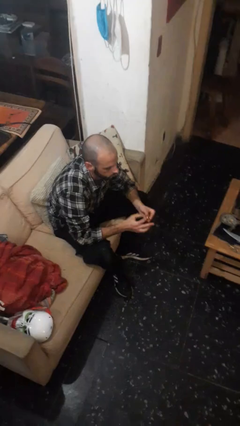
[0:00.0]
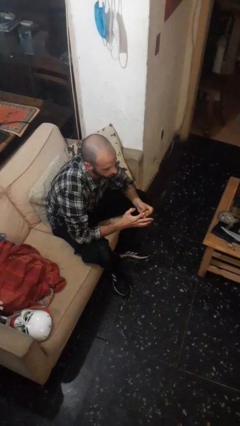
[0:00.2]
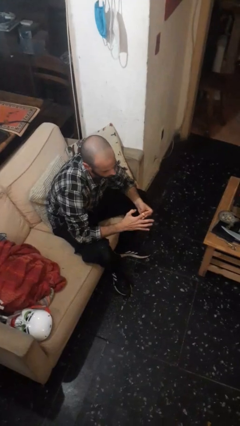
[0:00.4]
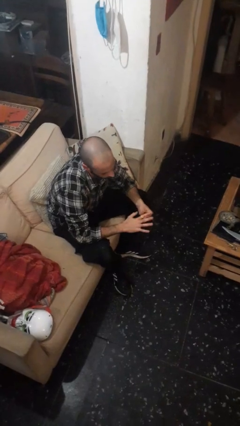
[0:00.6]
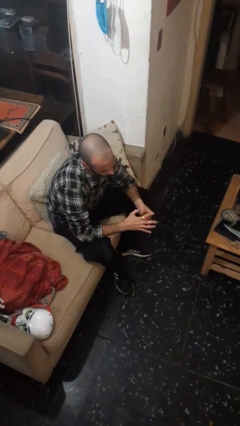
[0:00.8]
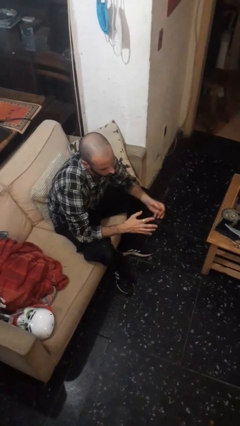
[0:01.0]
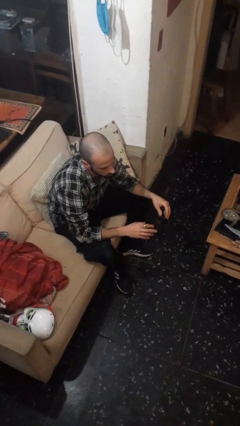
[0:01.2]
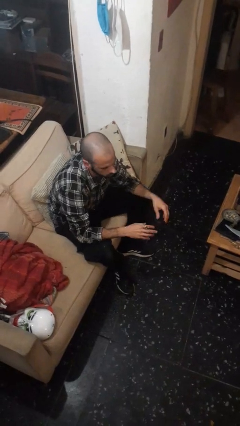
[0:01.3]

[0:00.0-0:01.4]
person puts on ring

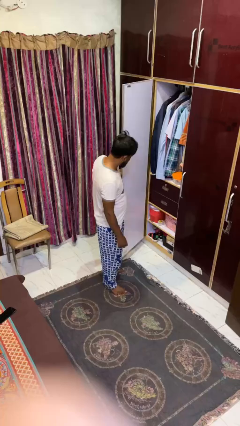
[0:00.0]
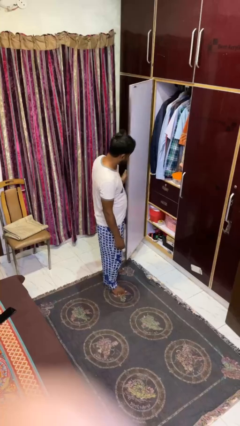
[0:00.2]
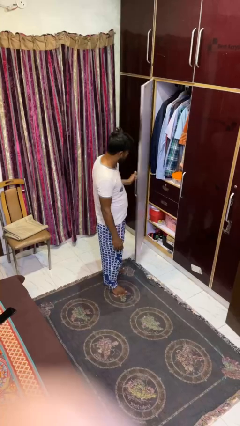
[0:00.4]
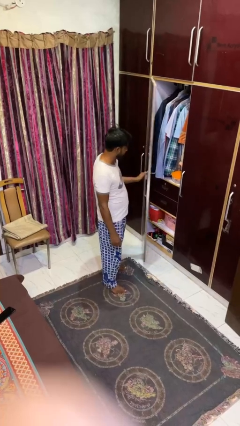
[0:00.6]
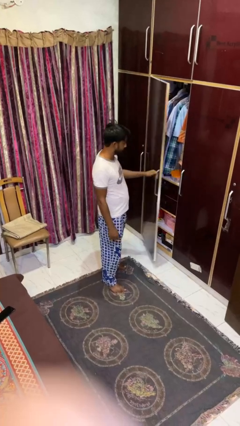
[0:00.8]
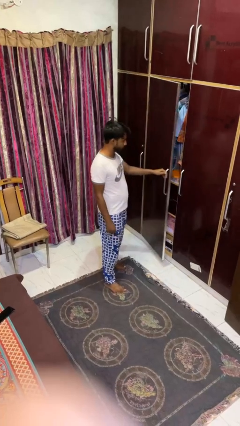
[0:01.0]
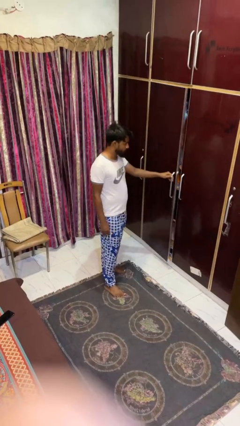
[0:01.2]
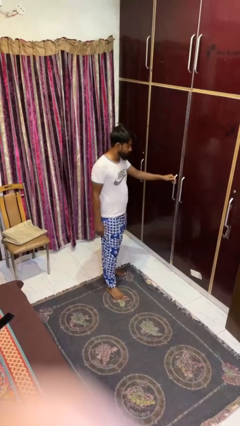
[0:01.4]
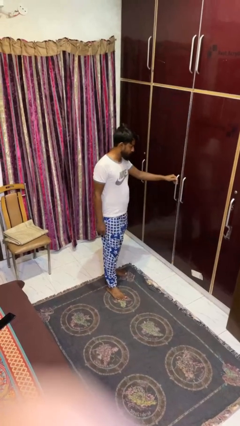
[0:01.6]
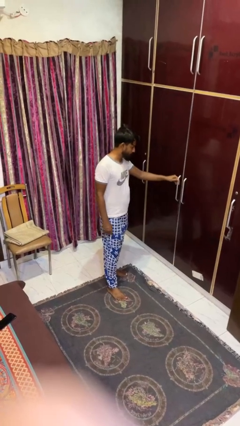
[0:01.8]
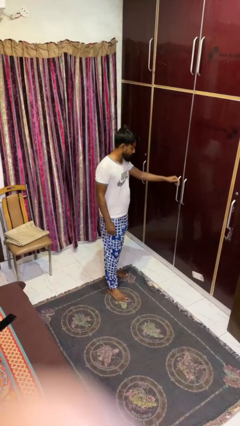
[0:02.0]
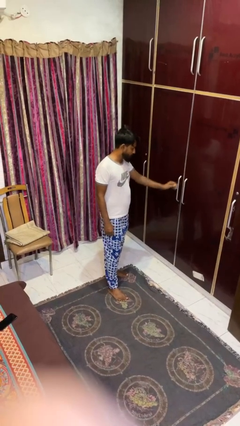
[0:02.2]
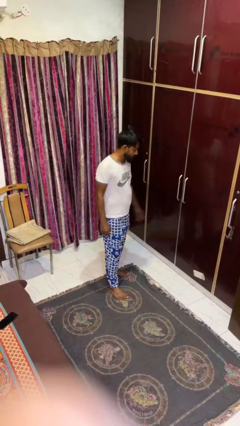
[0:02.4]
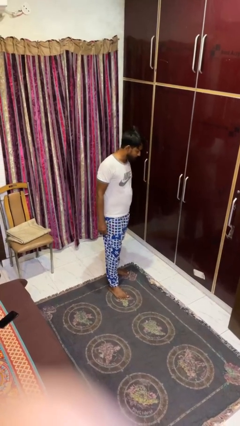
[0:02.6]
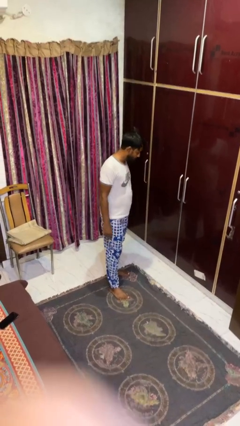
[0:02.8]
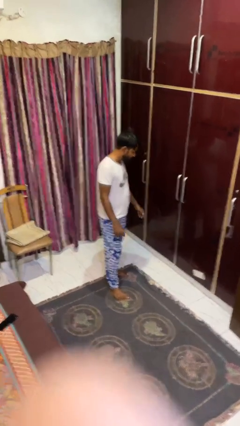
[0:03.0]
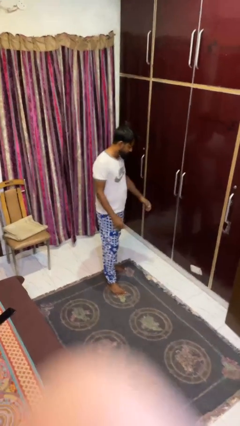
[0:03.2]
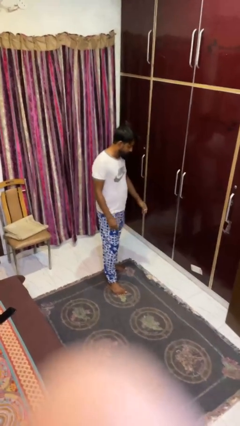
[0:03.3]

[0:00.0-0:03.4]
person closes closet door

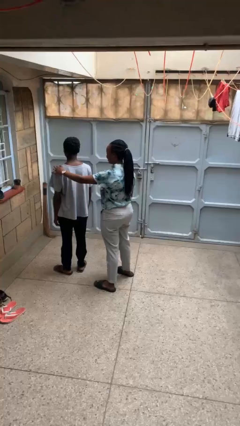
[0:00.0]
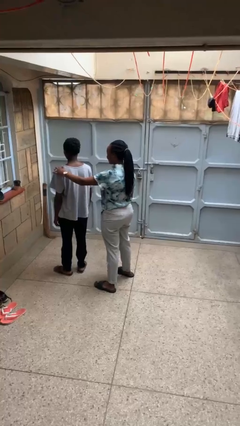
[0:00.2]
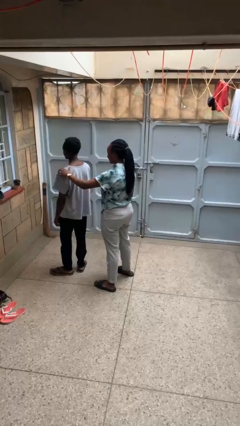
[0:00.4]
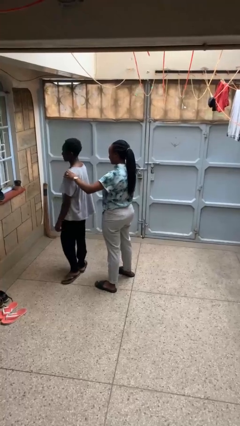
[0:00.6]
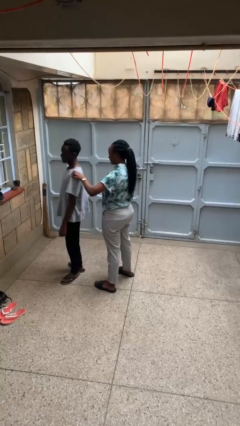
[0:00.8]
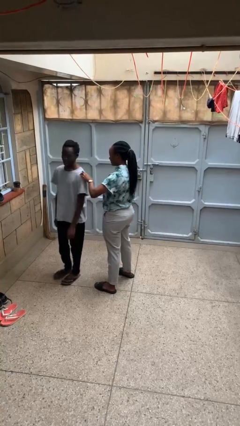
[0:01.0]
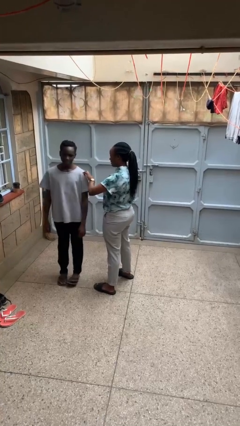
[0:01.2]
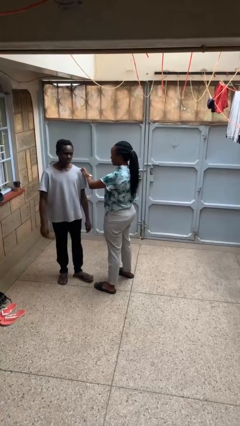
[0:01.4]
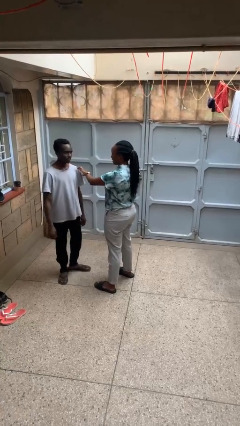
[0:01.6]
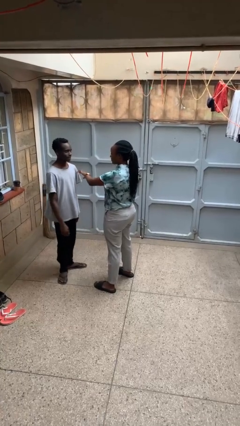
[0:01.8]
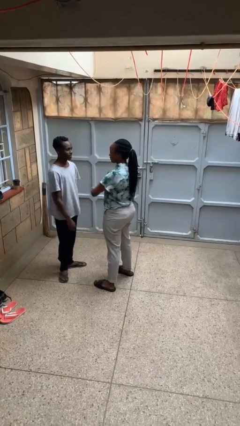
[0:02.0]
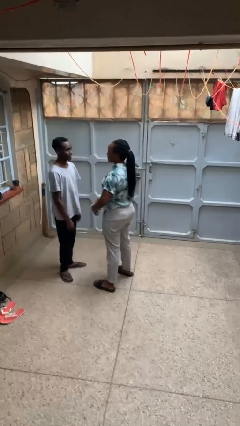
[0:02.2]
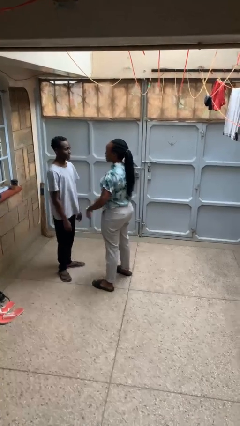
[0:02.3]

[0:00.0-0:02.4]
person spins person around

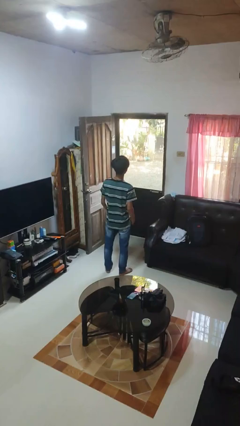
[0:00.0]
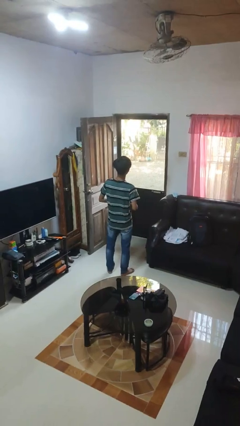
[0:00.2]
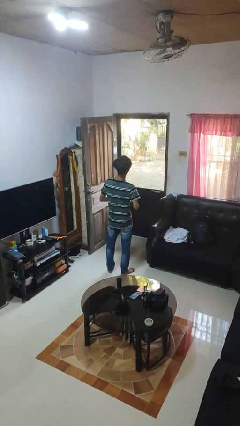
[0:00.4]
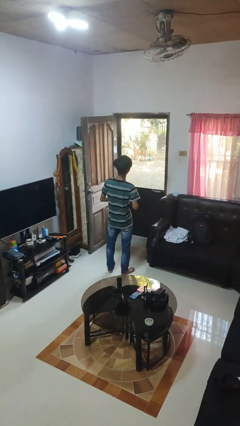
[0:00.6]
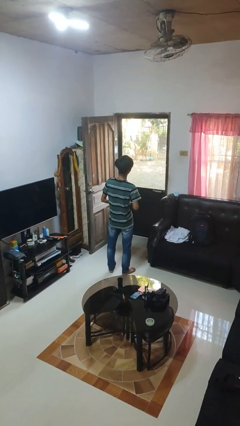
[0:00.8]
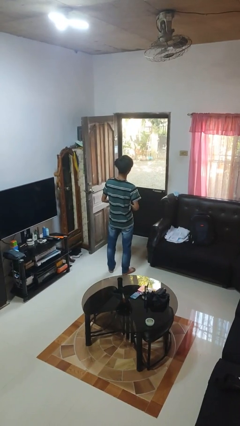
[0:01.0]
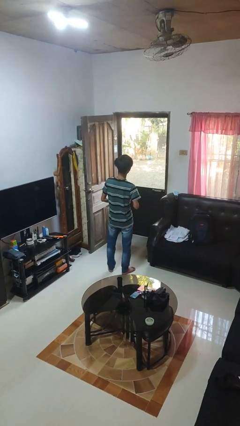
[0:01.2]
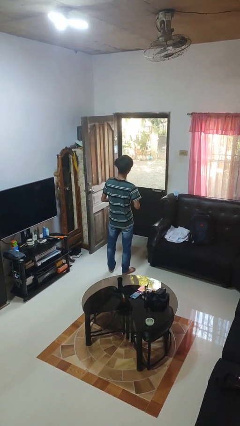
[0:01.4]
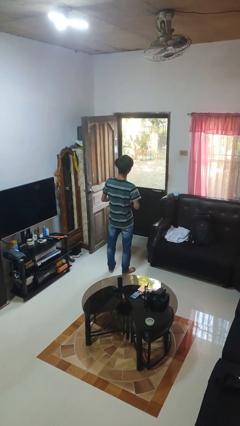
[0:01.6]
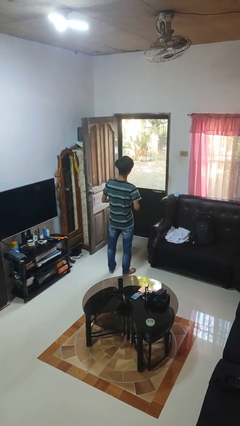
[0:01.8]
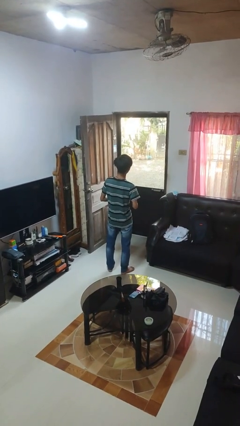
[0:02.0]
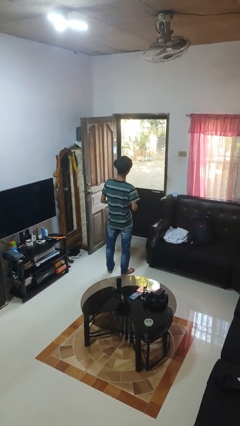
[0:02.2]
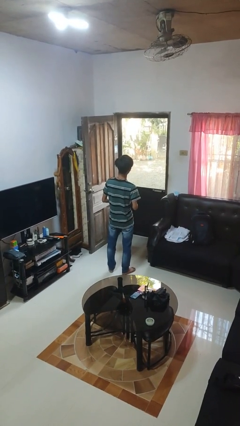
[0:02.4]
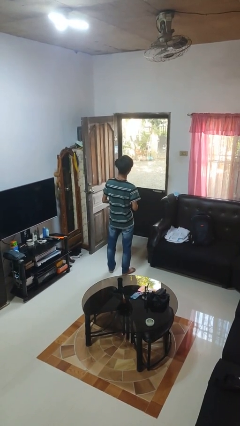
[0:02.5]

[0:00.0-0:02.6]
person unbuttons shirt

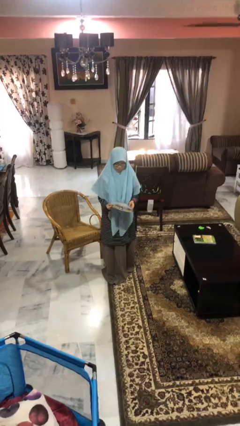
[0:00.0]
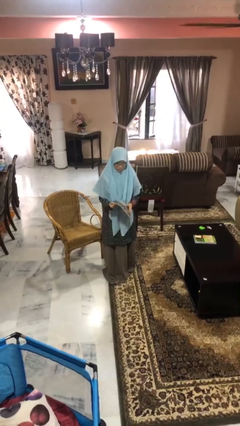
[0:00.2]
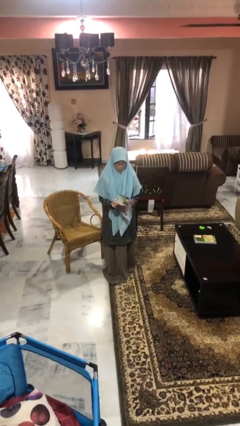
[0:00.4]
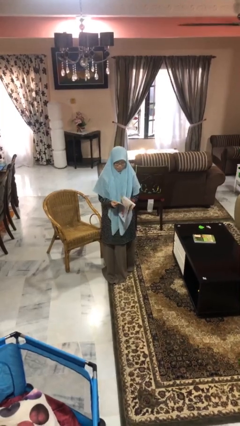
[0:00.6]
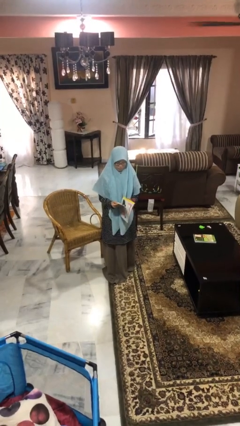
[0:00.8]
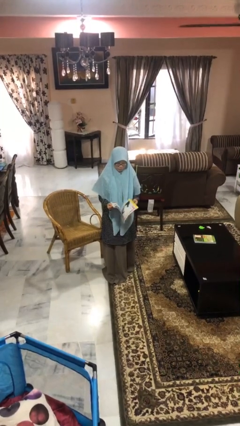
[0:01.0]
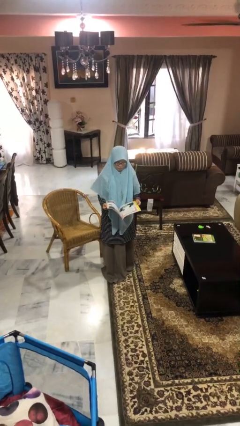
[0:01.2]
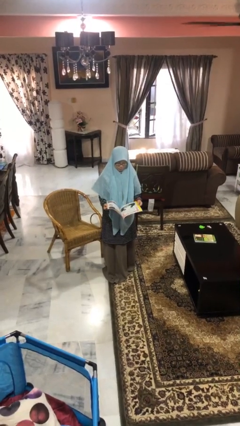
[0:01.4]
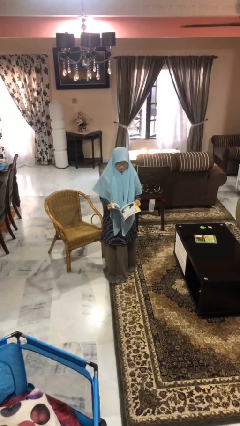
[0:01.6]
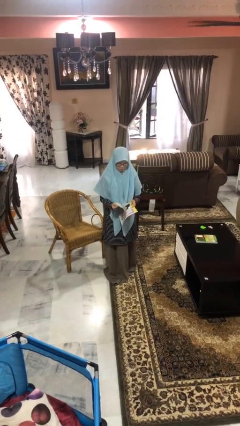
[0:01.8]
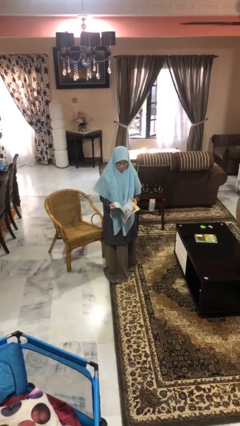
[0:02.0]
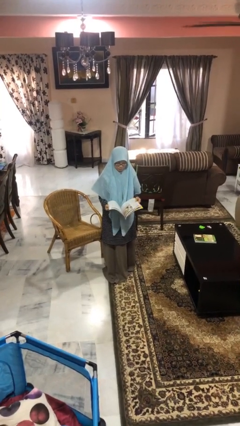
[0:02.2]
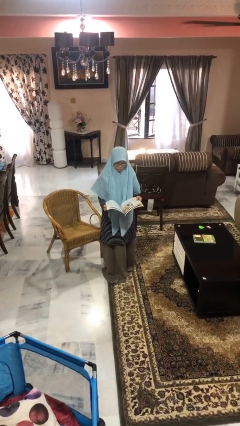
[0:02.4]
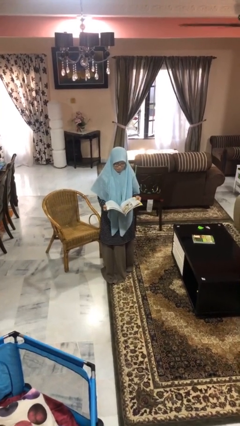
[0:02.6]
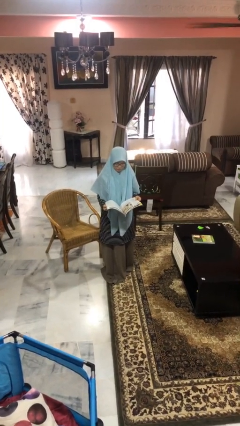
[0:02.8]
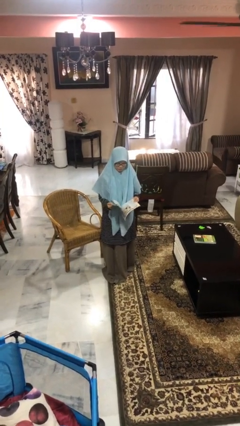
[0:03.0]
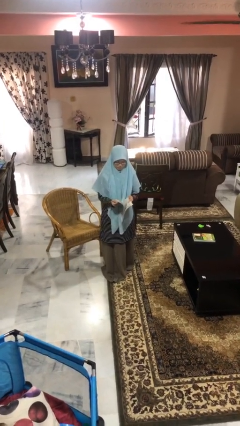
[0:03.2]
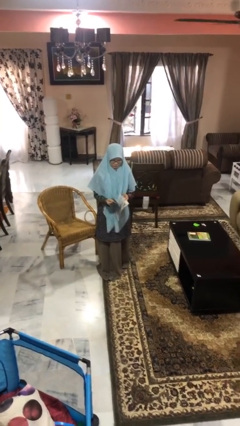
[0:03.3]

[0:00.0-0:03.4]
person reads magazine

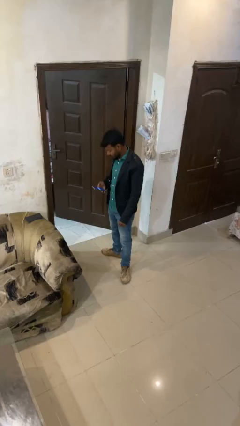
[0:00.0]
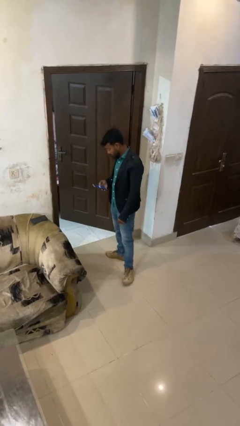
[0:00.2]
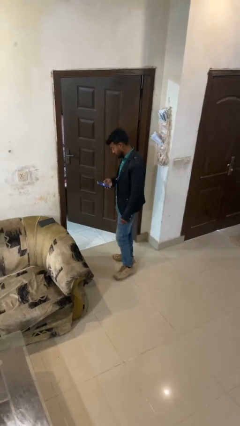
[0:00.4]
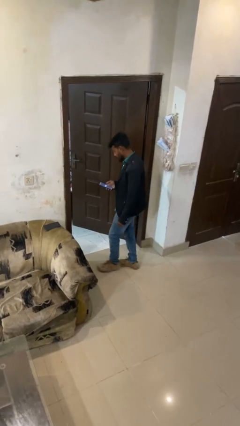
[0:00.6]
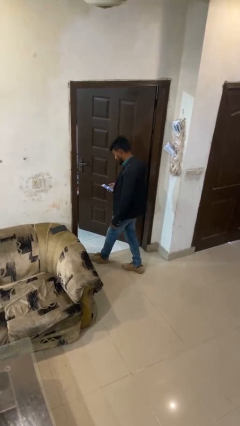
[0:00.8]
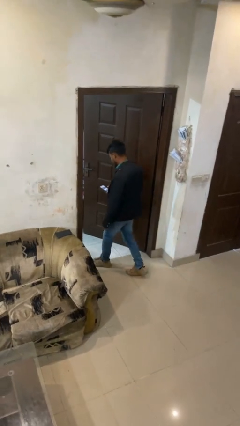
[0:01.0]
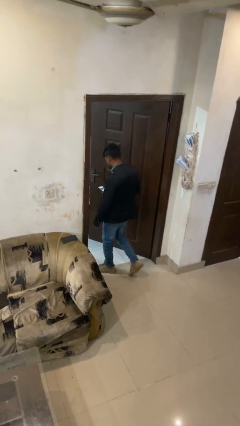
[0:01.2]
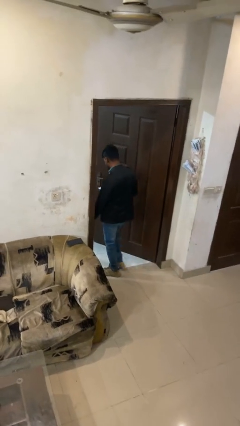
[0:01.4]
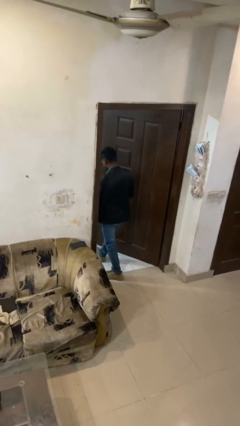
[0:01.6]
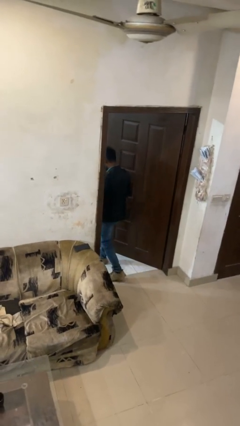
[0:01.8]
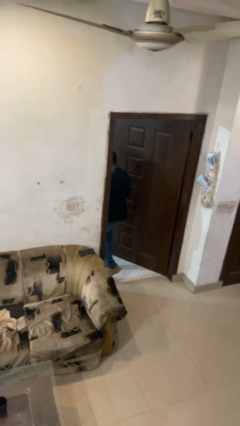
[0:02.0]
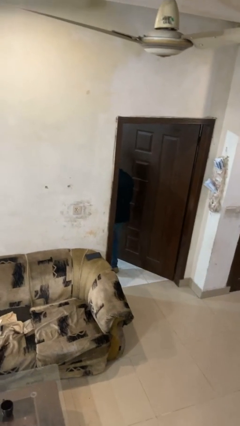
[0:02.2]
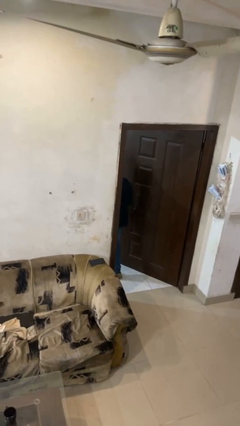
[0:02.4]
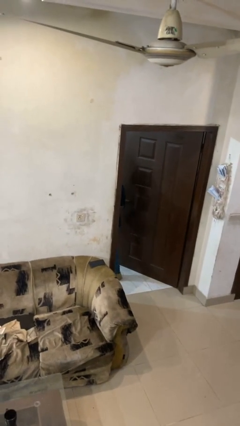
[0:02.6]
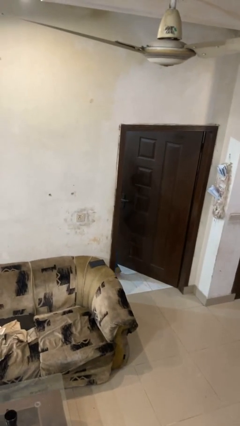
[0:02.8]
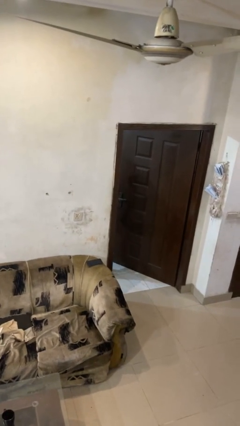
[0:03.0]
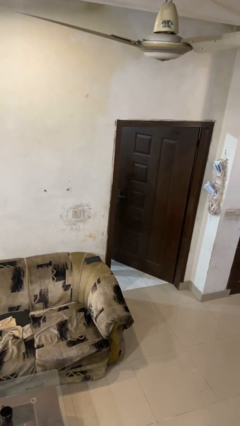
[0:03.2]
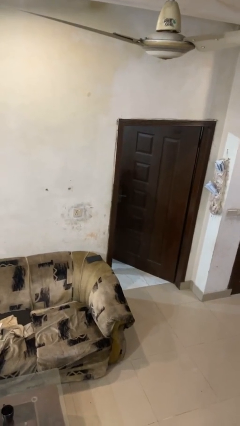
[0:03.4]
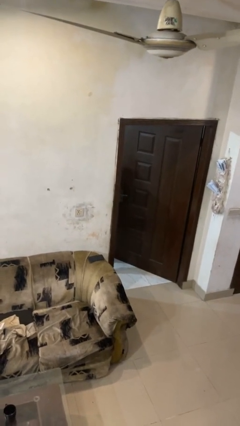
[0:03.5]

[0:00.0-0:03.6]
person exits scene through structure

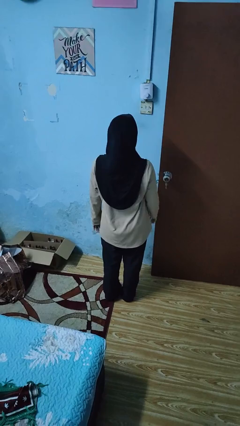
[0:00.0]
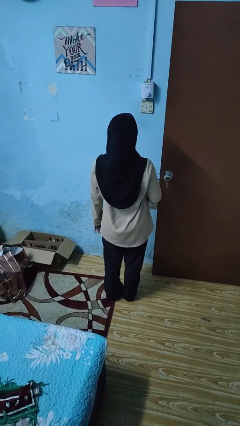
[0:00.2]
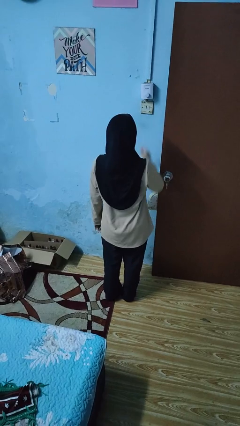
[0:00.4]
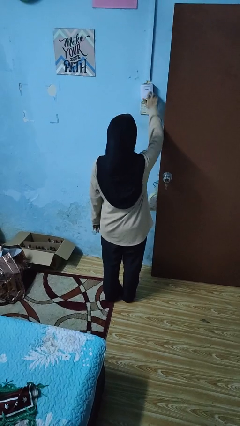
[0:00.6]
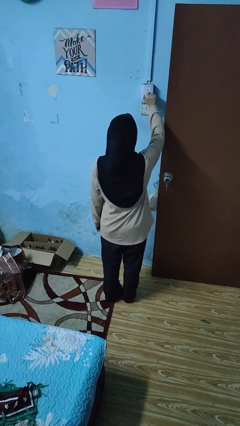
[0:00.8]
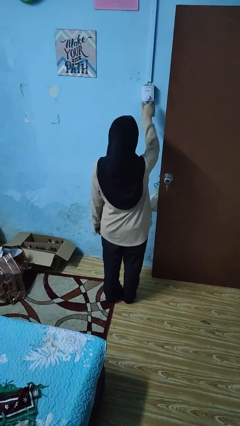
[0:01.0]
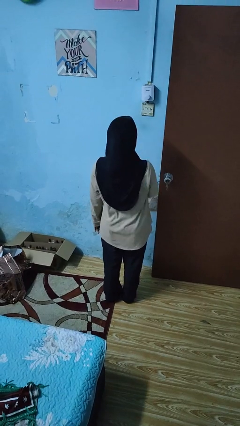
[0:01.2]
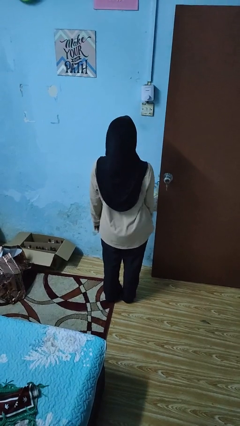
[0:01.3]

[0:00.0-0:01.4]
person adjusts thermostat
